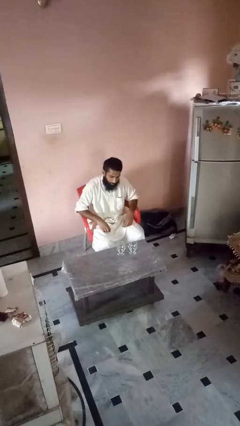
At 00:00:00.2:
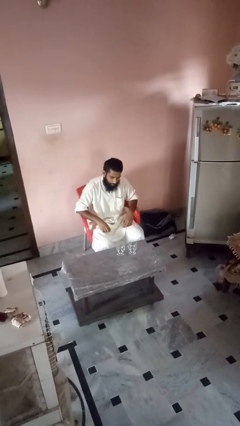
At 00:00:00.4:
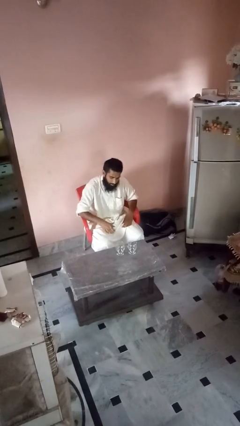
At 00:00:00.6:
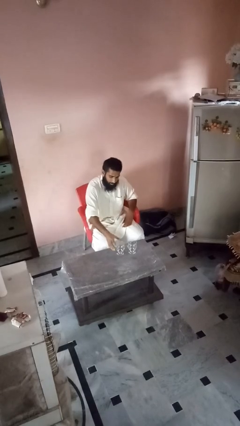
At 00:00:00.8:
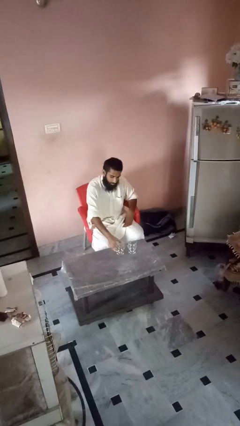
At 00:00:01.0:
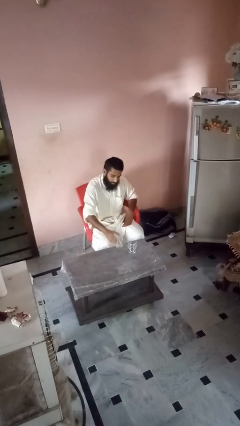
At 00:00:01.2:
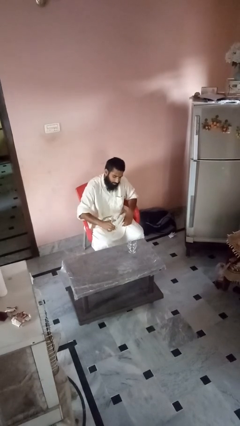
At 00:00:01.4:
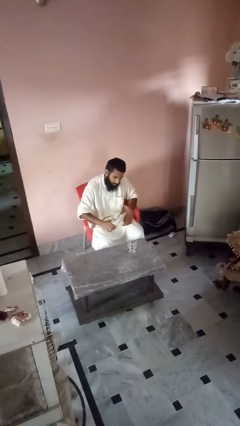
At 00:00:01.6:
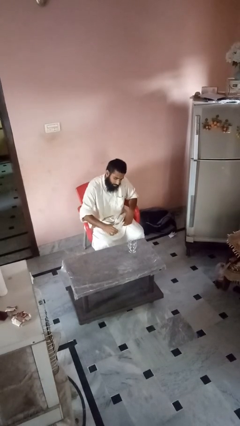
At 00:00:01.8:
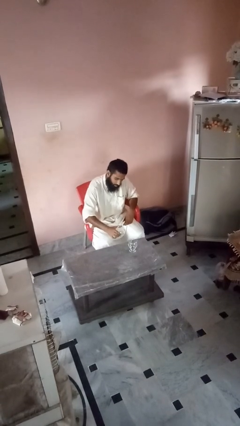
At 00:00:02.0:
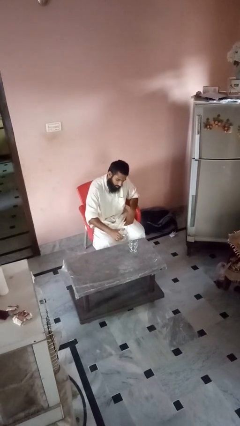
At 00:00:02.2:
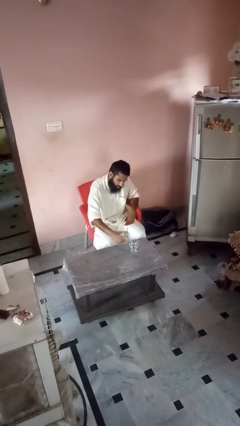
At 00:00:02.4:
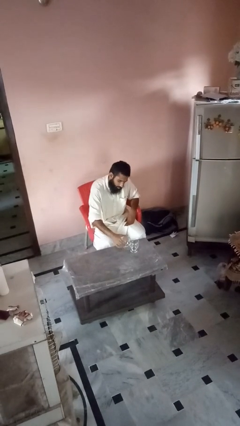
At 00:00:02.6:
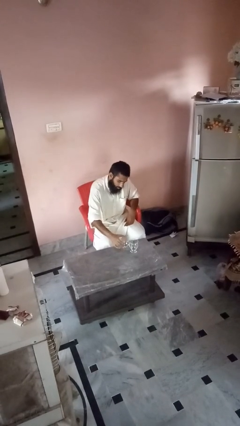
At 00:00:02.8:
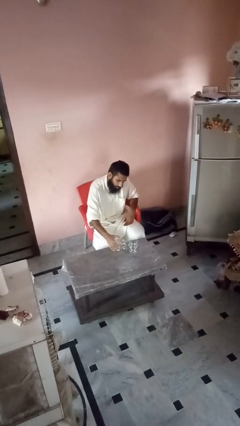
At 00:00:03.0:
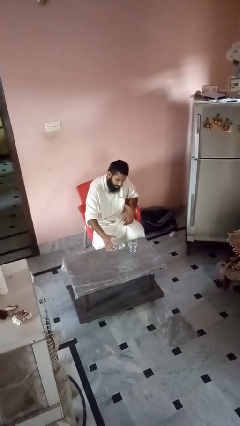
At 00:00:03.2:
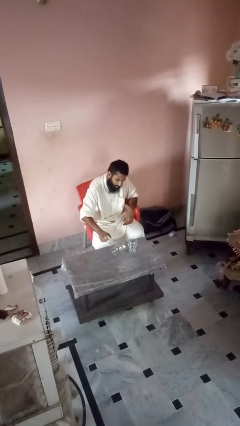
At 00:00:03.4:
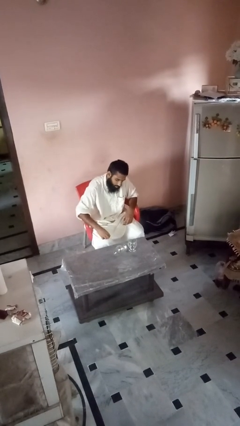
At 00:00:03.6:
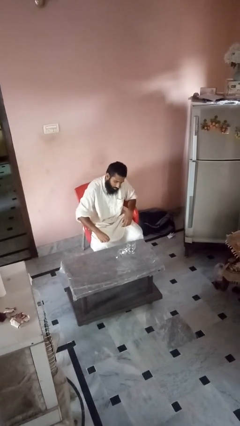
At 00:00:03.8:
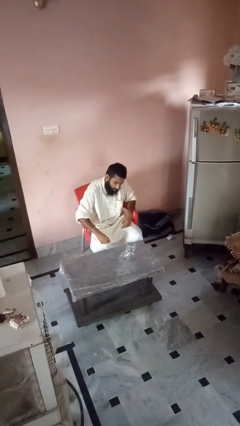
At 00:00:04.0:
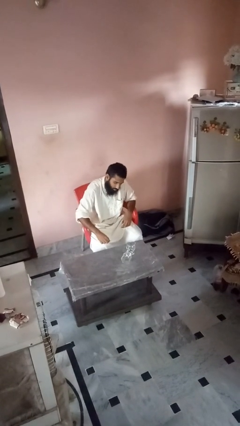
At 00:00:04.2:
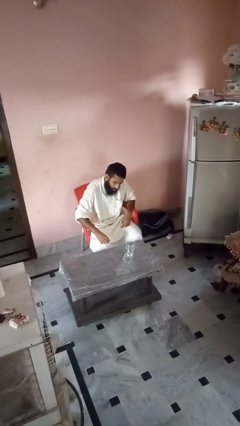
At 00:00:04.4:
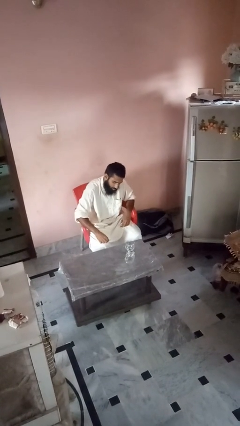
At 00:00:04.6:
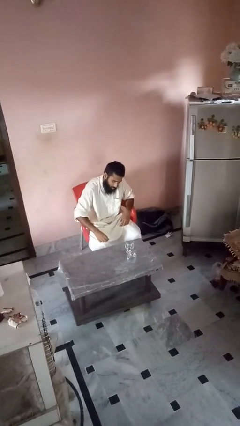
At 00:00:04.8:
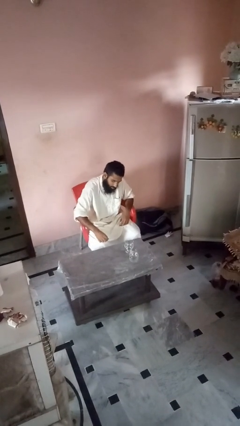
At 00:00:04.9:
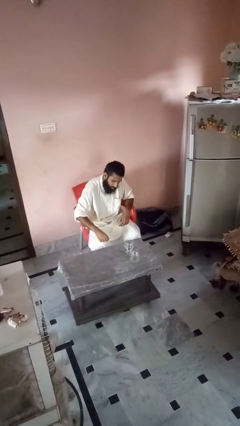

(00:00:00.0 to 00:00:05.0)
person knocks over glass

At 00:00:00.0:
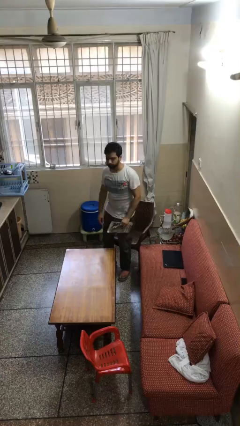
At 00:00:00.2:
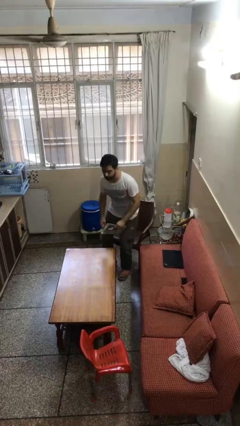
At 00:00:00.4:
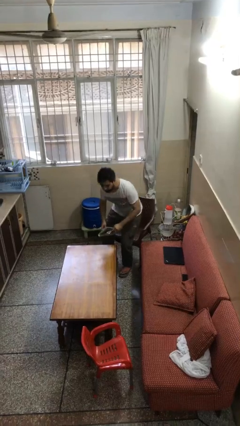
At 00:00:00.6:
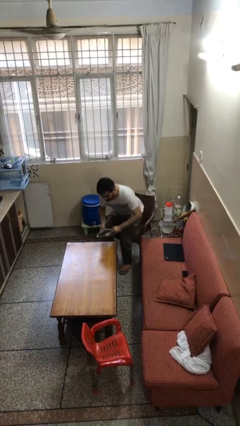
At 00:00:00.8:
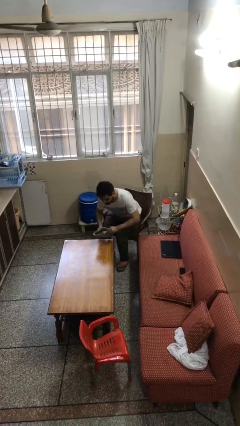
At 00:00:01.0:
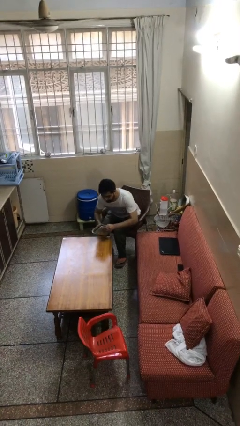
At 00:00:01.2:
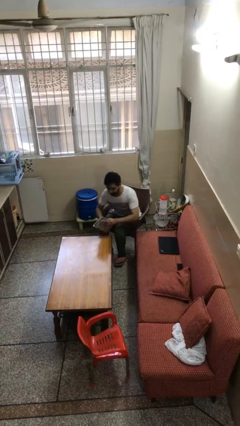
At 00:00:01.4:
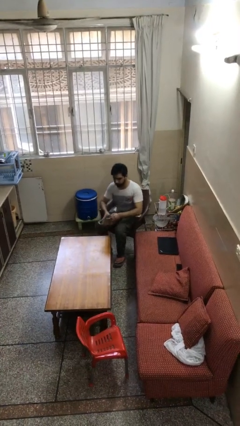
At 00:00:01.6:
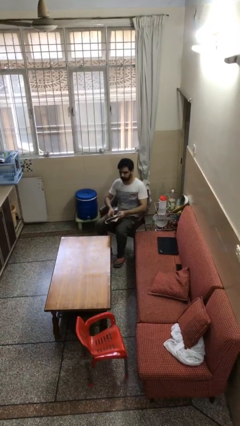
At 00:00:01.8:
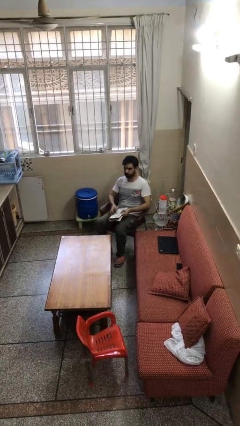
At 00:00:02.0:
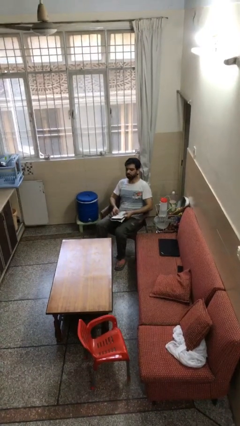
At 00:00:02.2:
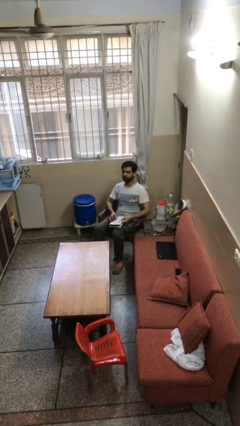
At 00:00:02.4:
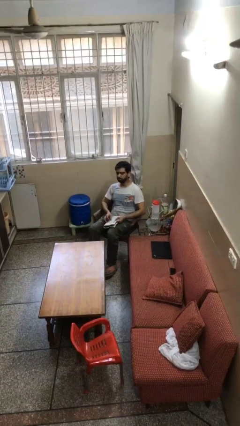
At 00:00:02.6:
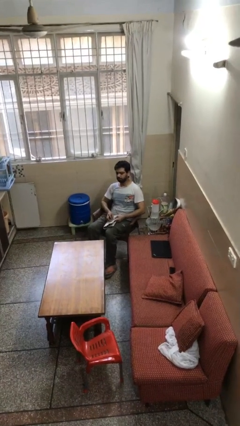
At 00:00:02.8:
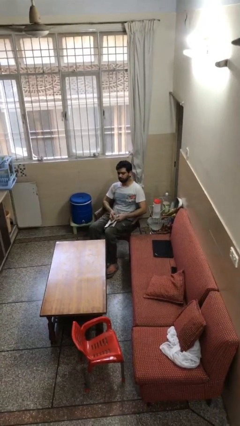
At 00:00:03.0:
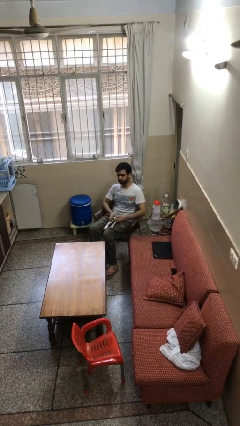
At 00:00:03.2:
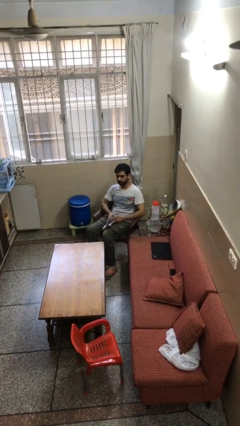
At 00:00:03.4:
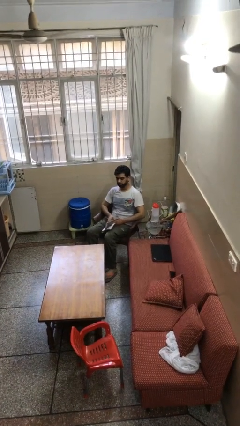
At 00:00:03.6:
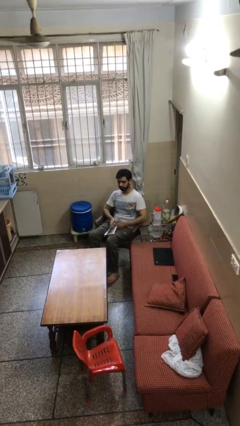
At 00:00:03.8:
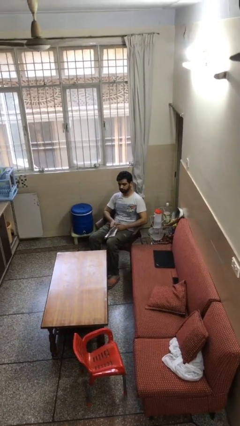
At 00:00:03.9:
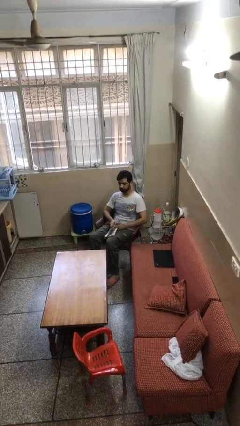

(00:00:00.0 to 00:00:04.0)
person sits down

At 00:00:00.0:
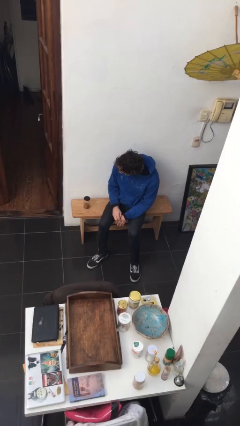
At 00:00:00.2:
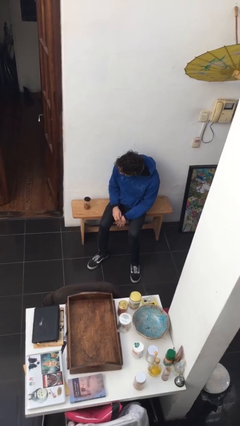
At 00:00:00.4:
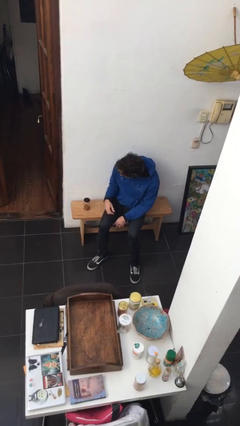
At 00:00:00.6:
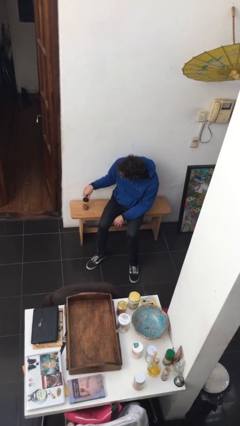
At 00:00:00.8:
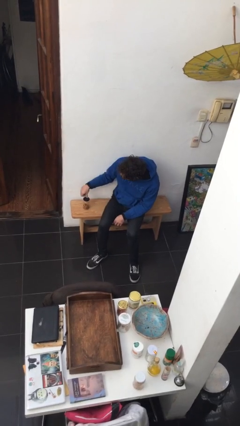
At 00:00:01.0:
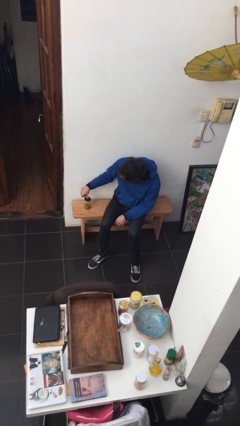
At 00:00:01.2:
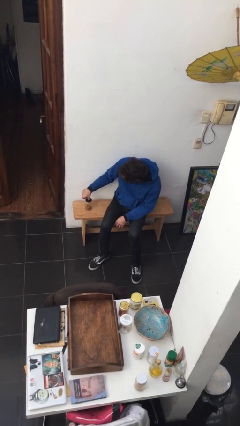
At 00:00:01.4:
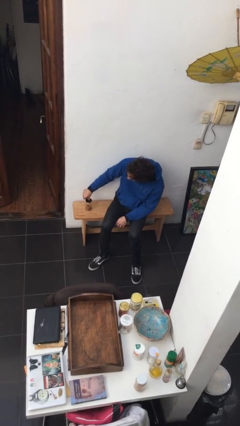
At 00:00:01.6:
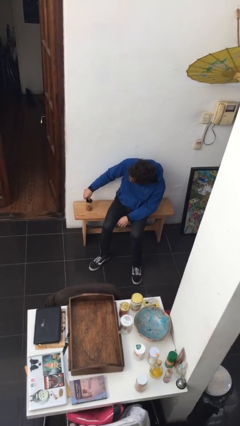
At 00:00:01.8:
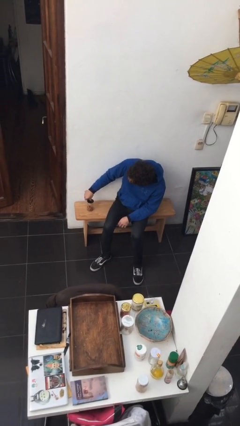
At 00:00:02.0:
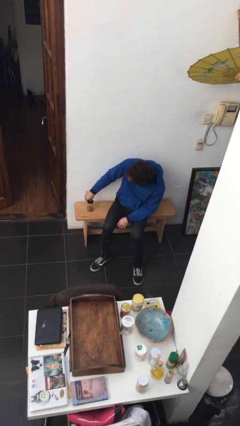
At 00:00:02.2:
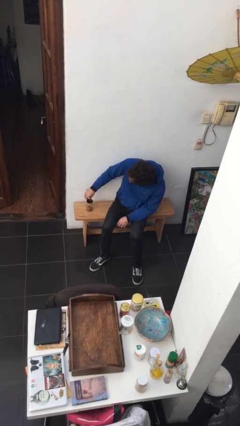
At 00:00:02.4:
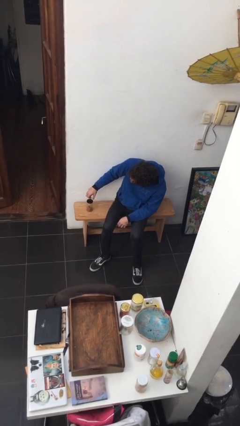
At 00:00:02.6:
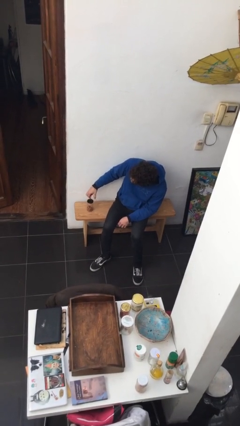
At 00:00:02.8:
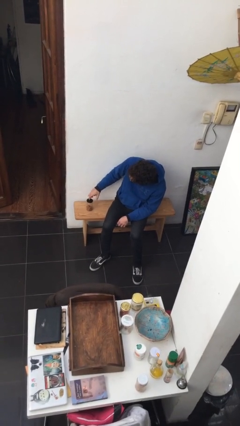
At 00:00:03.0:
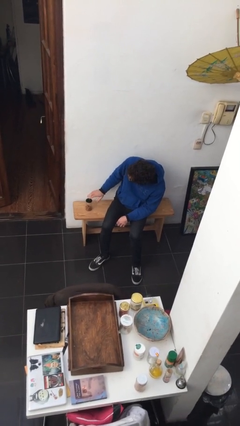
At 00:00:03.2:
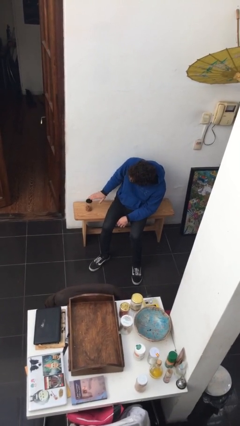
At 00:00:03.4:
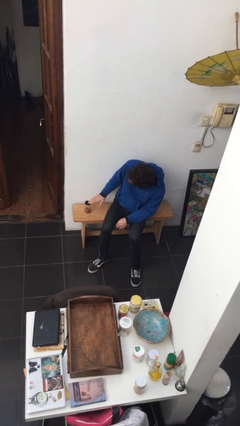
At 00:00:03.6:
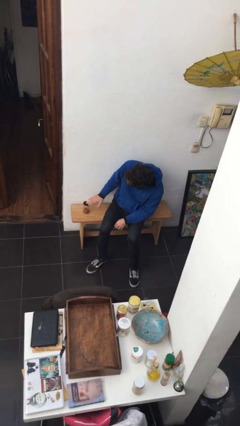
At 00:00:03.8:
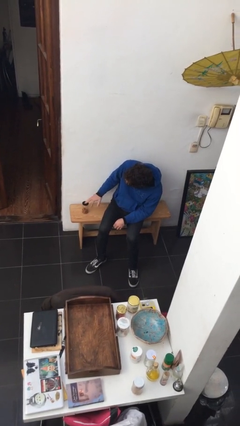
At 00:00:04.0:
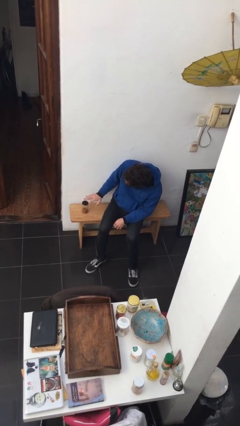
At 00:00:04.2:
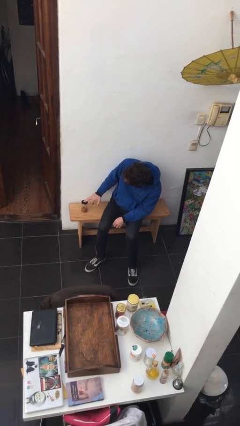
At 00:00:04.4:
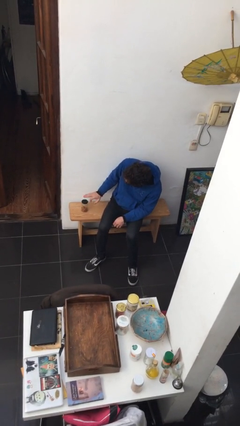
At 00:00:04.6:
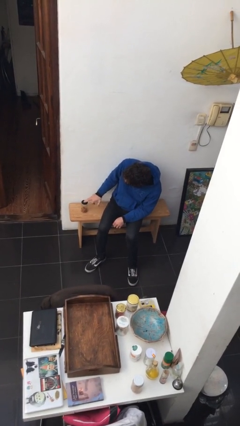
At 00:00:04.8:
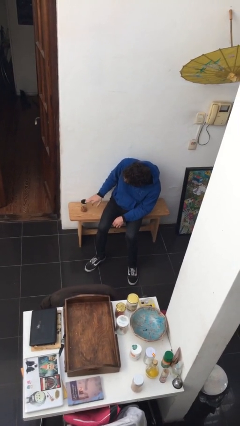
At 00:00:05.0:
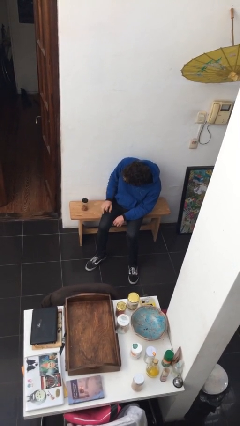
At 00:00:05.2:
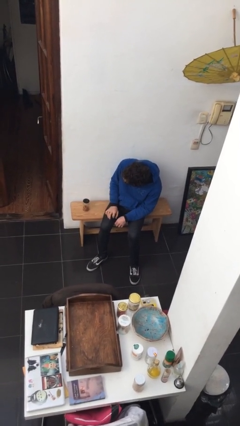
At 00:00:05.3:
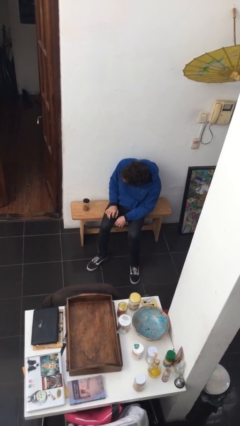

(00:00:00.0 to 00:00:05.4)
person taps object with finger

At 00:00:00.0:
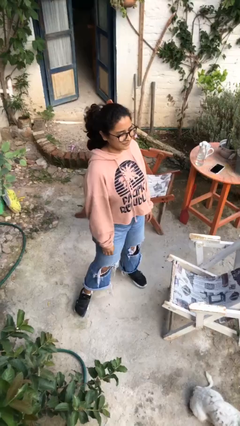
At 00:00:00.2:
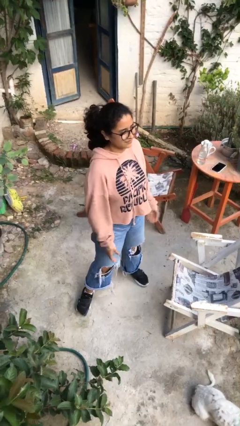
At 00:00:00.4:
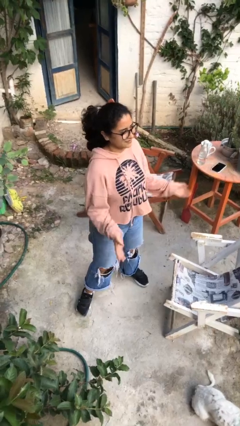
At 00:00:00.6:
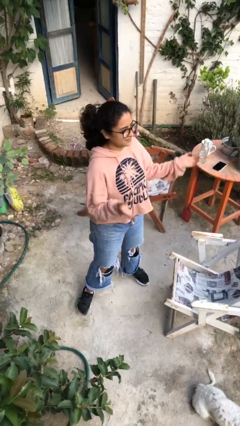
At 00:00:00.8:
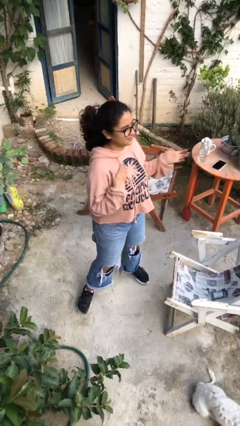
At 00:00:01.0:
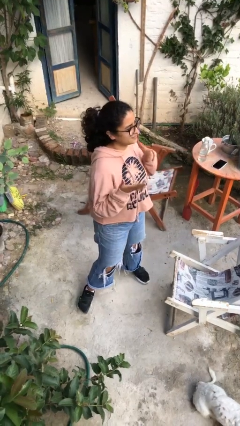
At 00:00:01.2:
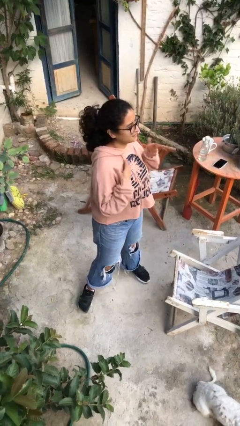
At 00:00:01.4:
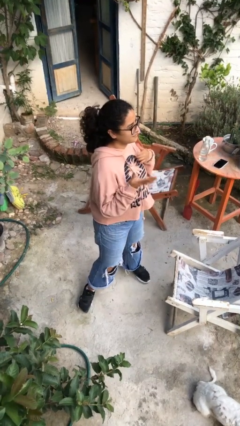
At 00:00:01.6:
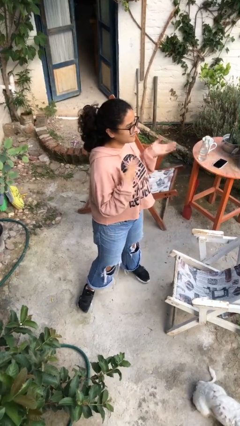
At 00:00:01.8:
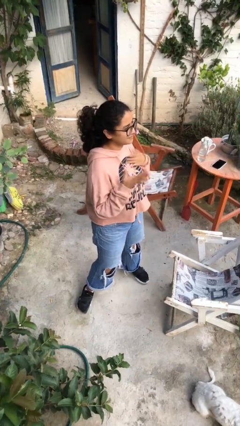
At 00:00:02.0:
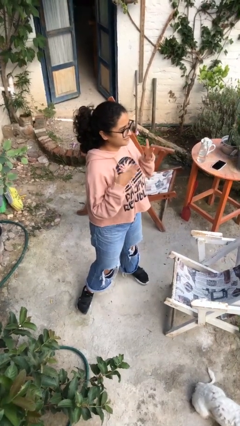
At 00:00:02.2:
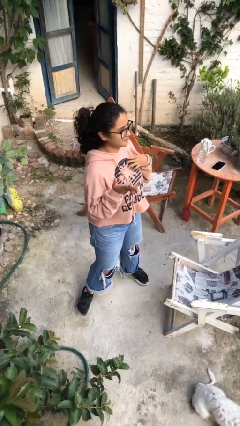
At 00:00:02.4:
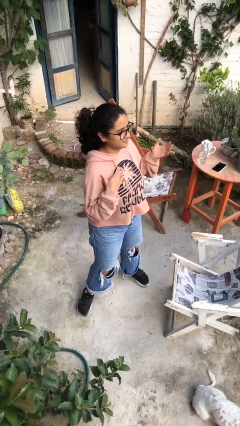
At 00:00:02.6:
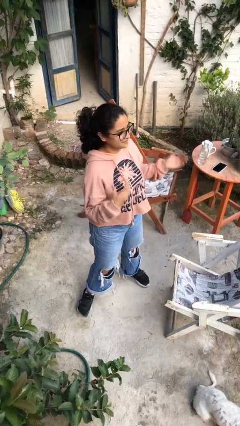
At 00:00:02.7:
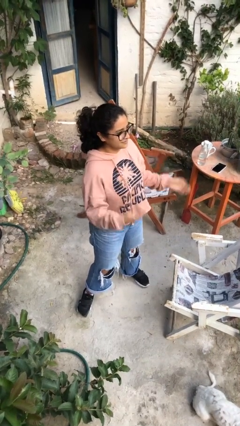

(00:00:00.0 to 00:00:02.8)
person drums on chest

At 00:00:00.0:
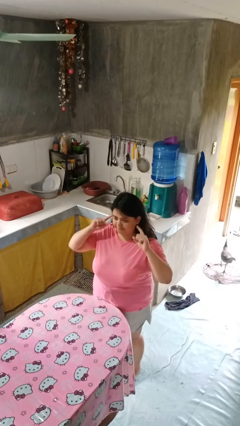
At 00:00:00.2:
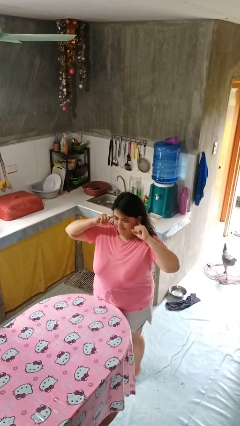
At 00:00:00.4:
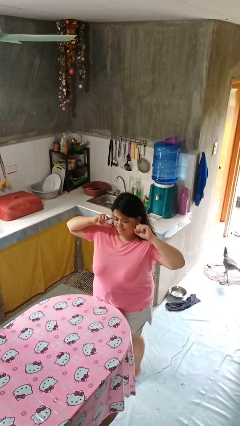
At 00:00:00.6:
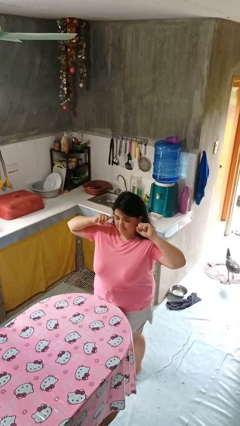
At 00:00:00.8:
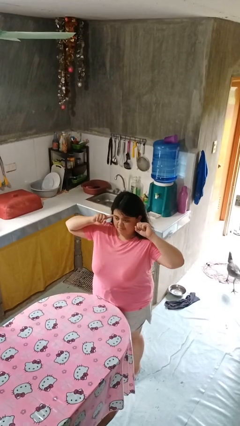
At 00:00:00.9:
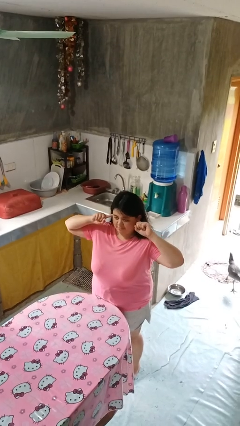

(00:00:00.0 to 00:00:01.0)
person puts fingers in ear
